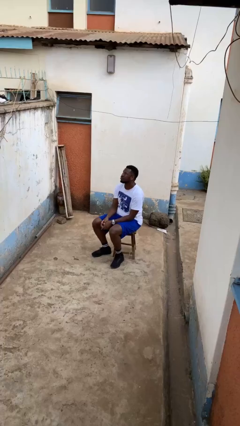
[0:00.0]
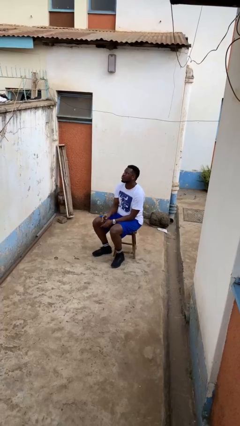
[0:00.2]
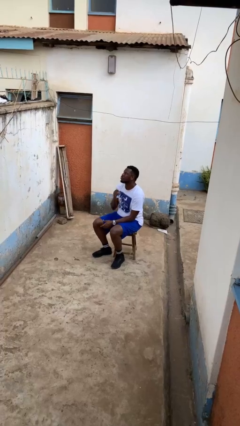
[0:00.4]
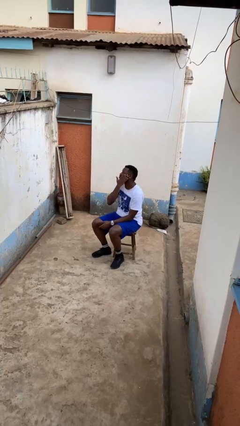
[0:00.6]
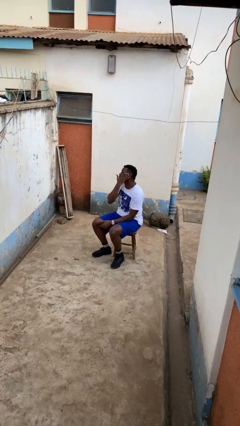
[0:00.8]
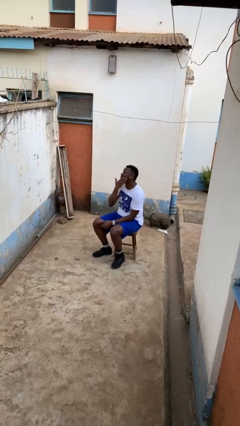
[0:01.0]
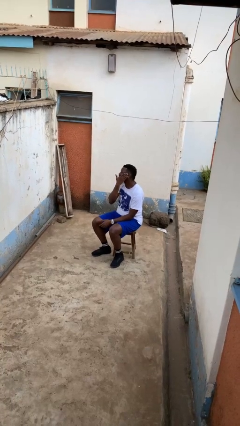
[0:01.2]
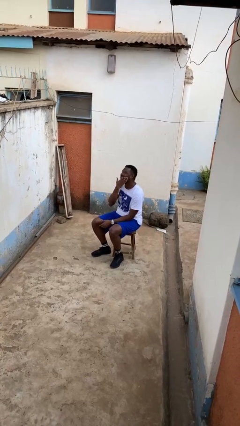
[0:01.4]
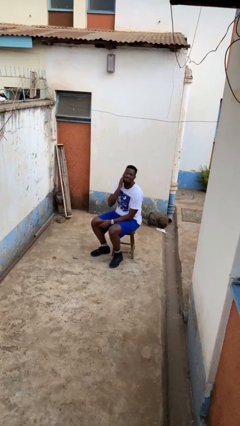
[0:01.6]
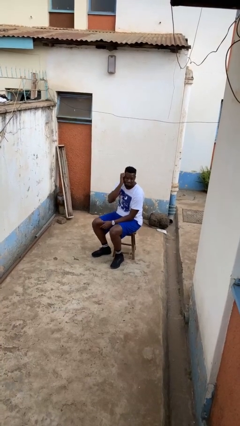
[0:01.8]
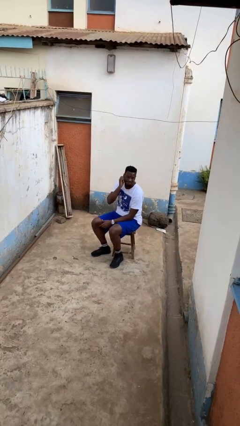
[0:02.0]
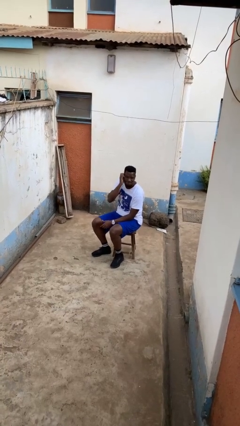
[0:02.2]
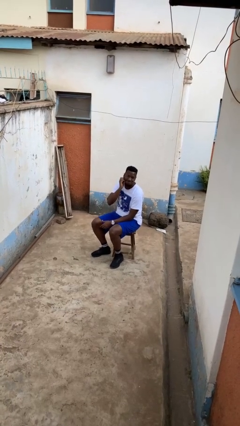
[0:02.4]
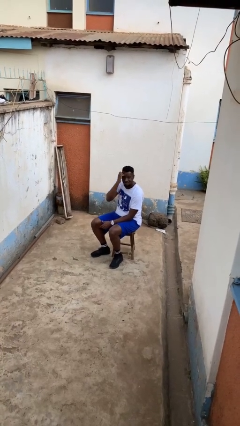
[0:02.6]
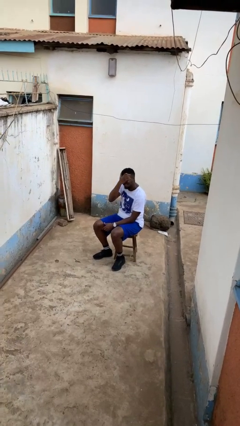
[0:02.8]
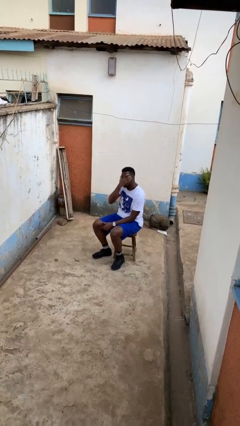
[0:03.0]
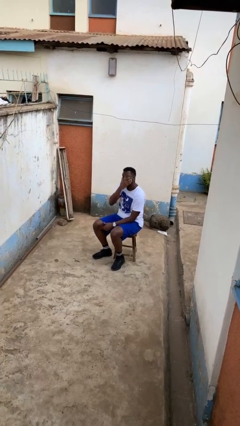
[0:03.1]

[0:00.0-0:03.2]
person scratches face

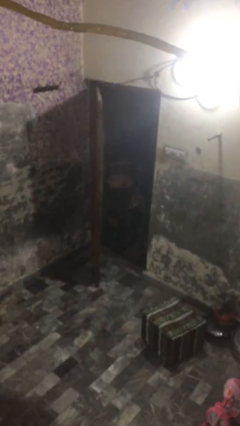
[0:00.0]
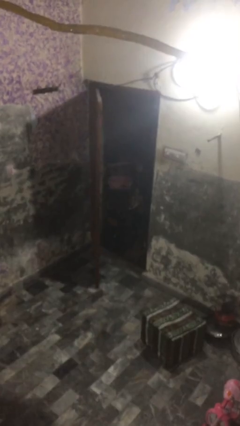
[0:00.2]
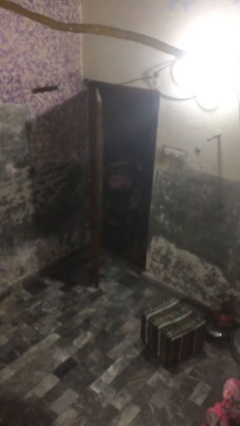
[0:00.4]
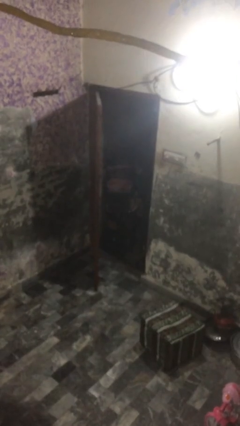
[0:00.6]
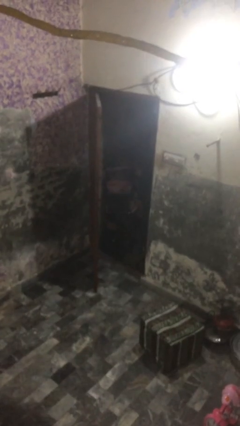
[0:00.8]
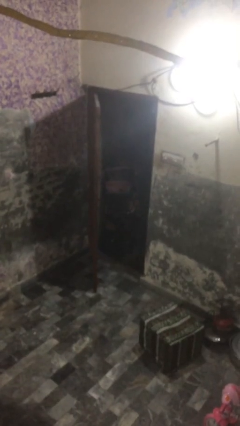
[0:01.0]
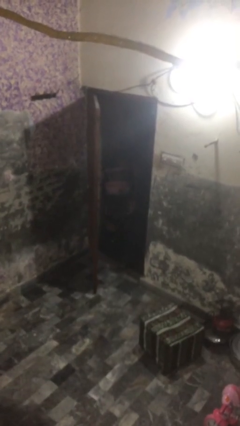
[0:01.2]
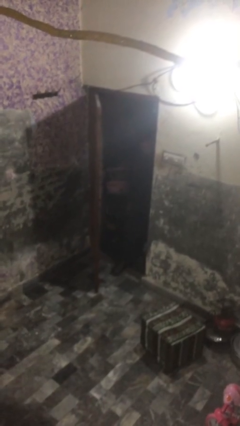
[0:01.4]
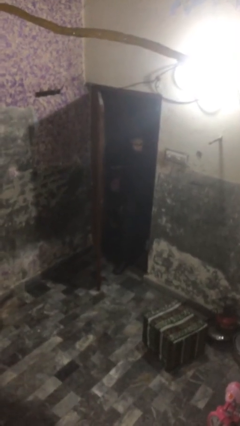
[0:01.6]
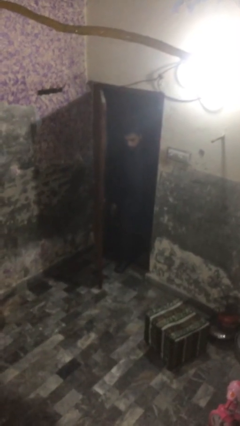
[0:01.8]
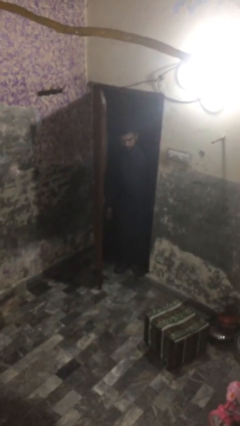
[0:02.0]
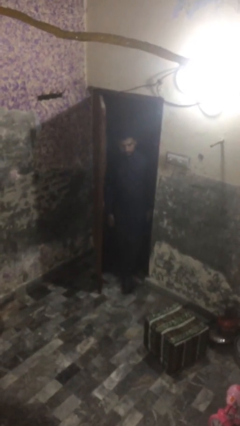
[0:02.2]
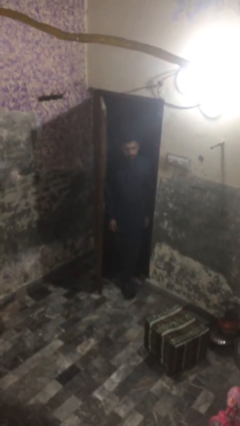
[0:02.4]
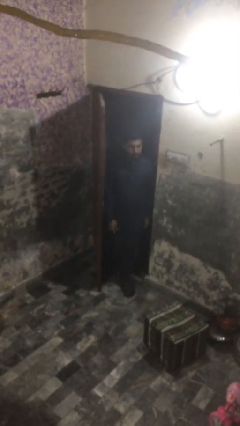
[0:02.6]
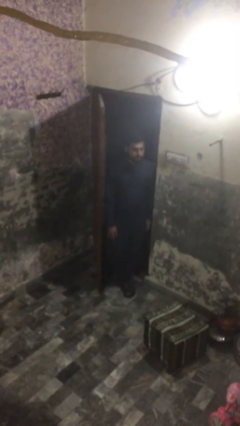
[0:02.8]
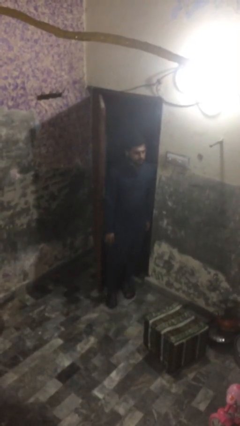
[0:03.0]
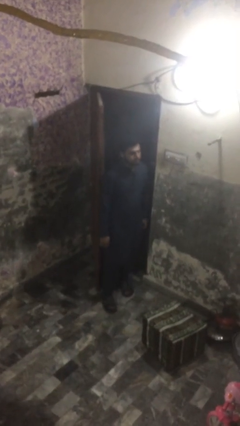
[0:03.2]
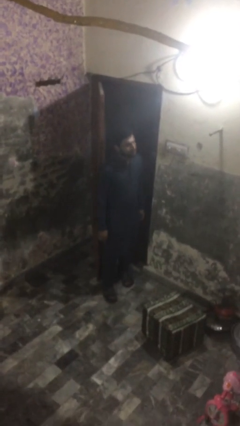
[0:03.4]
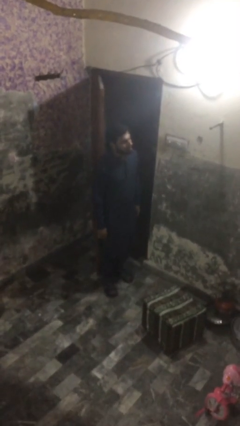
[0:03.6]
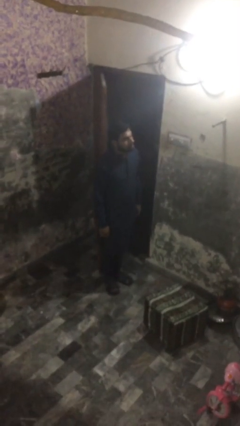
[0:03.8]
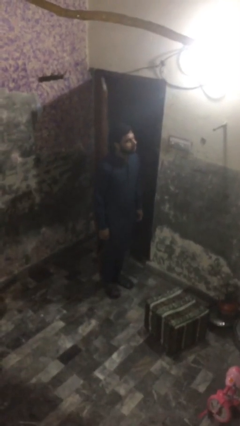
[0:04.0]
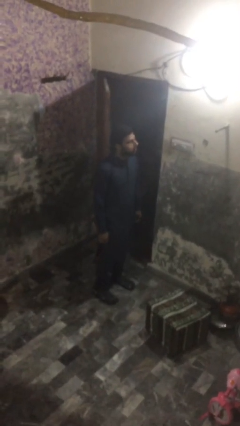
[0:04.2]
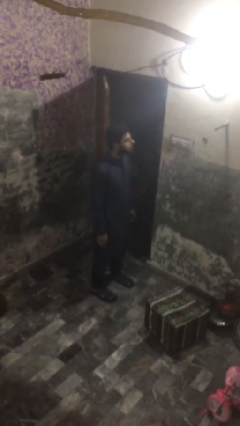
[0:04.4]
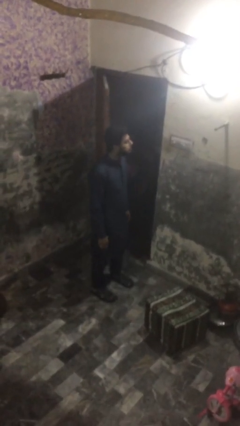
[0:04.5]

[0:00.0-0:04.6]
person enters scene through structure

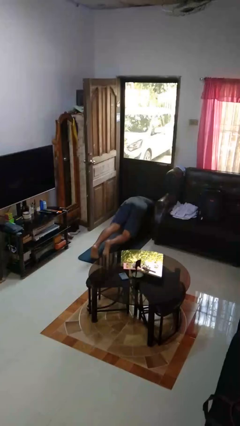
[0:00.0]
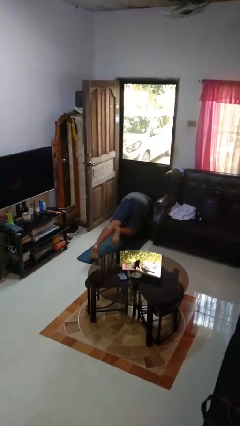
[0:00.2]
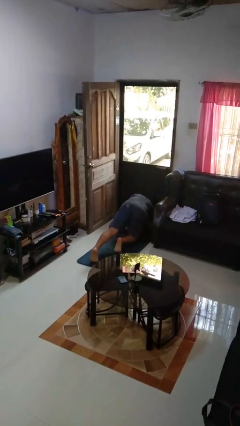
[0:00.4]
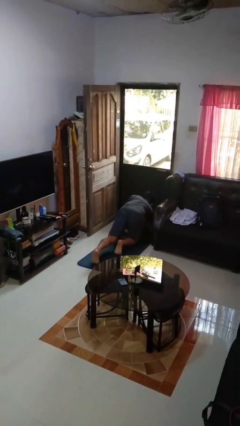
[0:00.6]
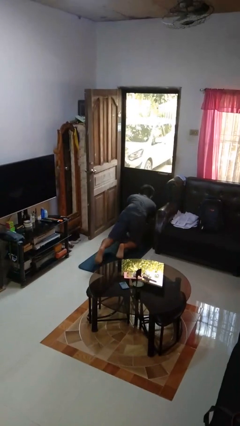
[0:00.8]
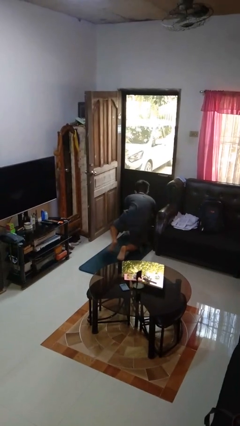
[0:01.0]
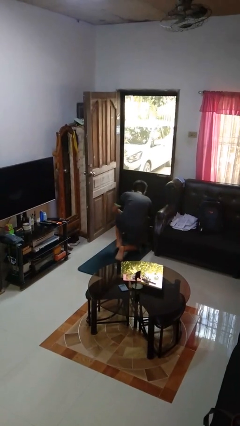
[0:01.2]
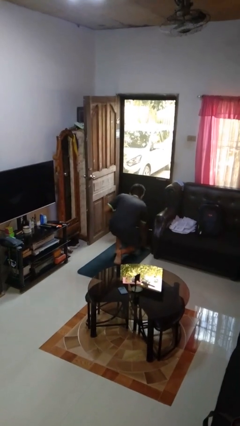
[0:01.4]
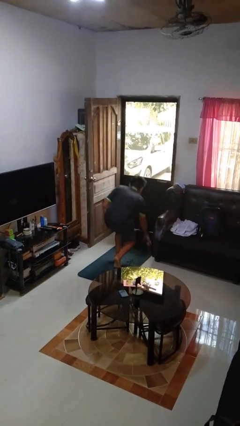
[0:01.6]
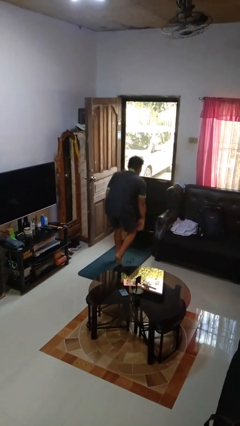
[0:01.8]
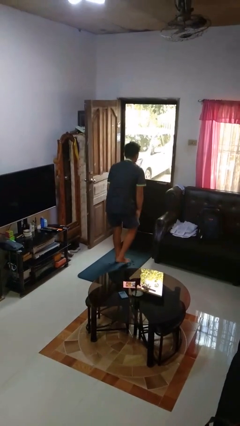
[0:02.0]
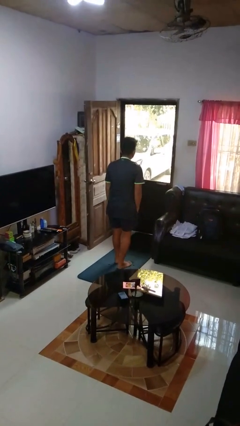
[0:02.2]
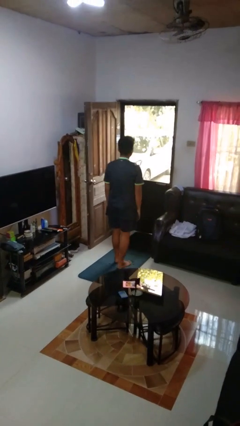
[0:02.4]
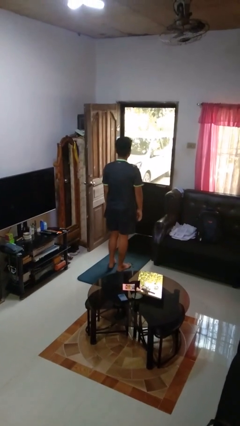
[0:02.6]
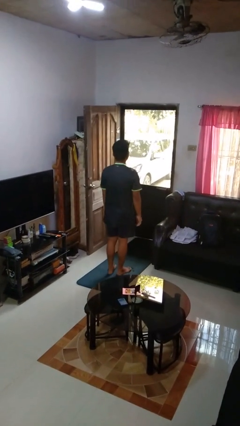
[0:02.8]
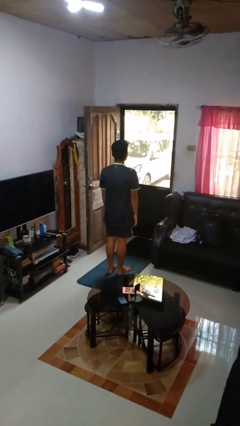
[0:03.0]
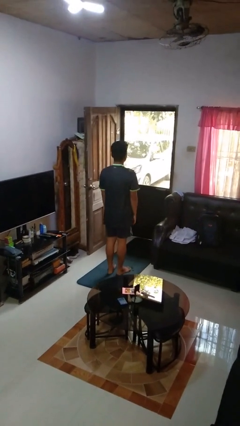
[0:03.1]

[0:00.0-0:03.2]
person stands up from floor

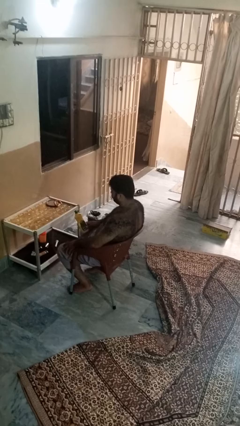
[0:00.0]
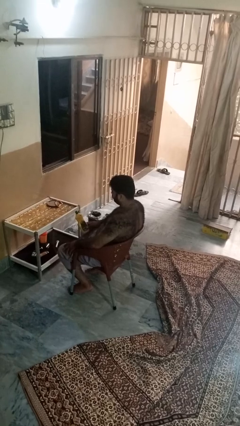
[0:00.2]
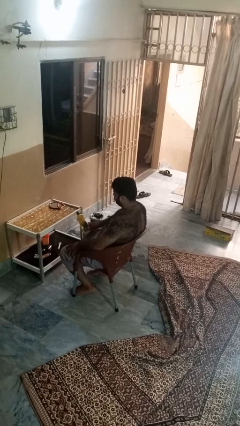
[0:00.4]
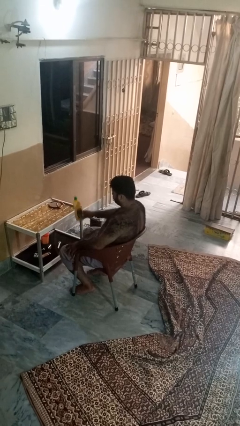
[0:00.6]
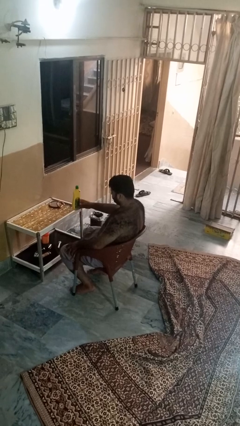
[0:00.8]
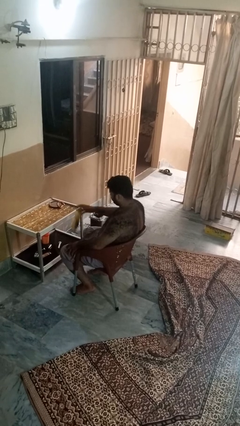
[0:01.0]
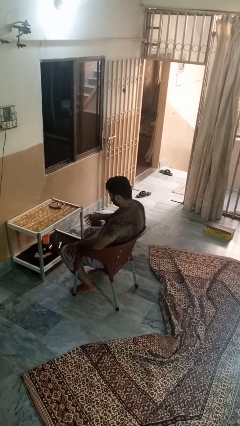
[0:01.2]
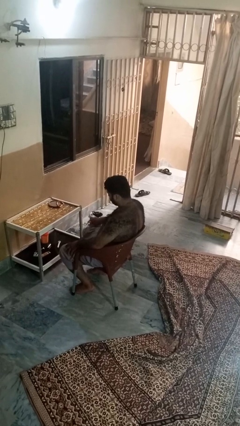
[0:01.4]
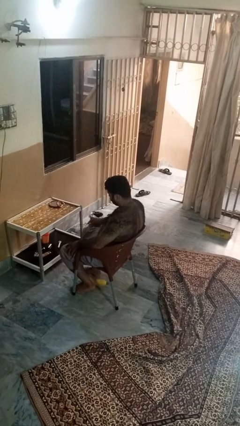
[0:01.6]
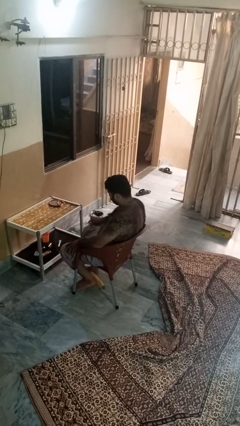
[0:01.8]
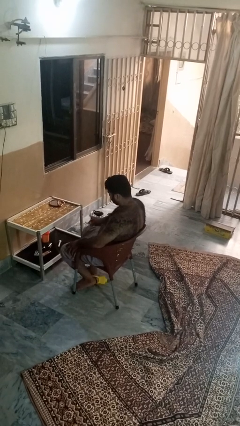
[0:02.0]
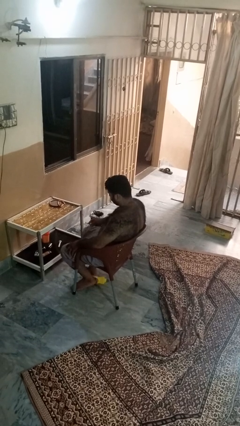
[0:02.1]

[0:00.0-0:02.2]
person throws object to ground

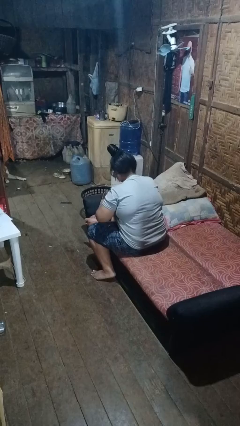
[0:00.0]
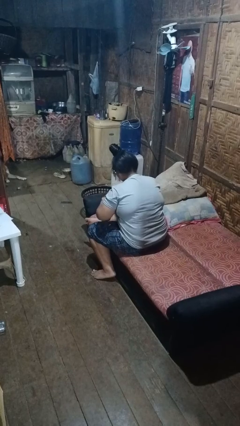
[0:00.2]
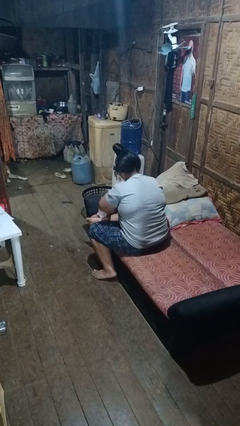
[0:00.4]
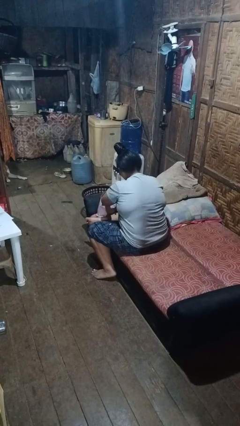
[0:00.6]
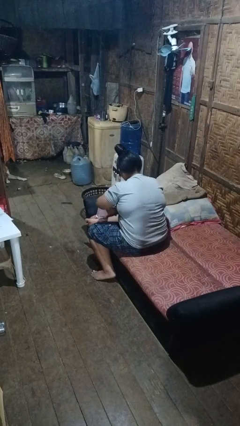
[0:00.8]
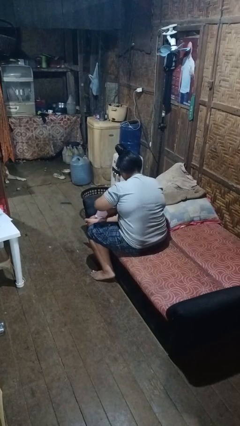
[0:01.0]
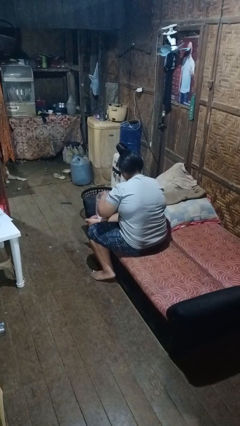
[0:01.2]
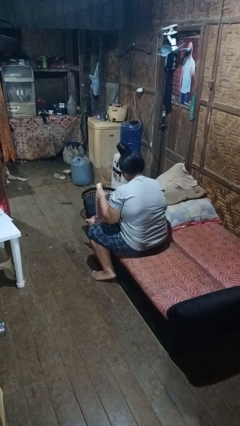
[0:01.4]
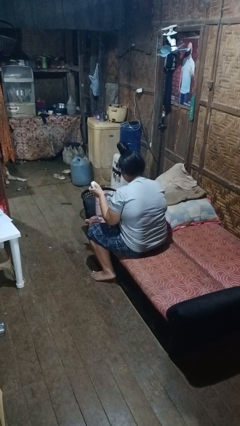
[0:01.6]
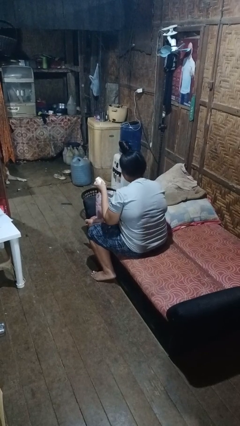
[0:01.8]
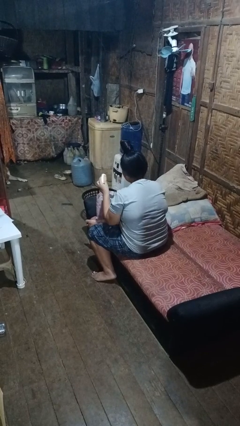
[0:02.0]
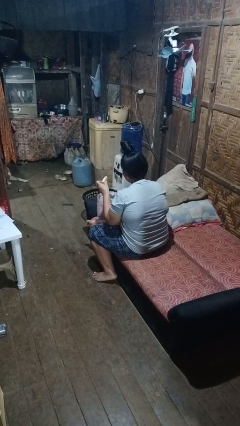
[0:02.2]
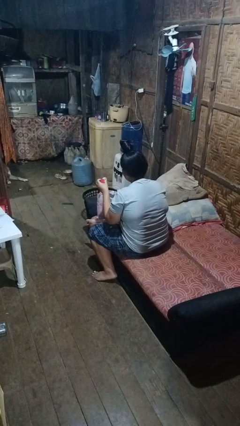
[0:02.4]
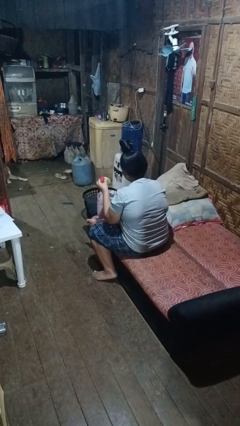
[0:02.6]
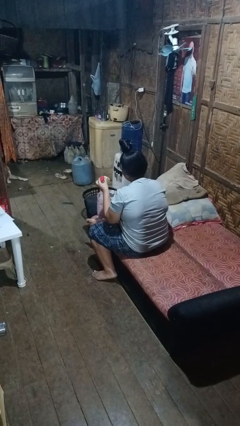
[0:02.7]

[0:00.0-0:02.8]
person takes object from bag

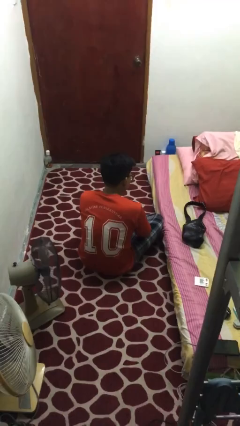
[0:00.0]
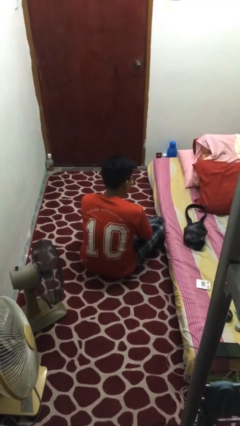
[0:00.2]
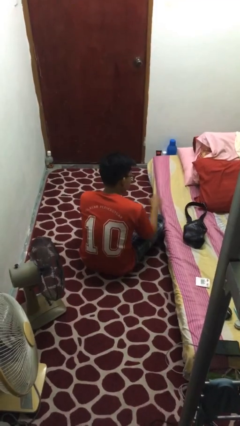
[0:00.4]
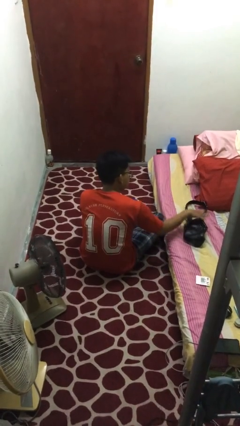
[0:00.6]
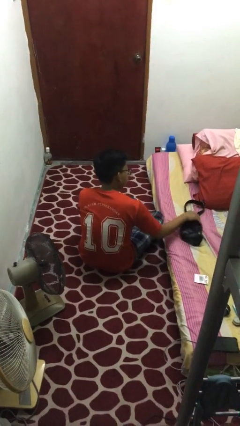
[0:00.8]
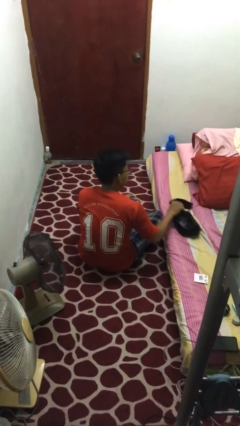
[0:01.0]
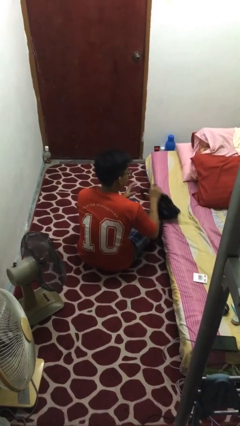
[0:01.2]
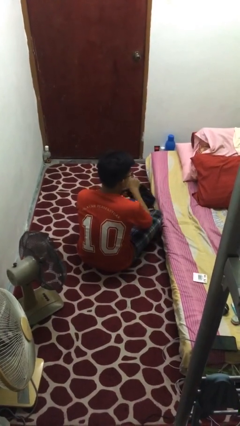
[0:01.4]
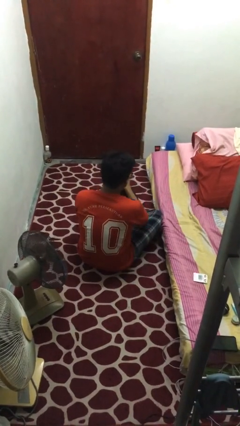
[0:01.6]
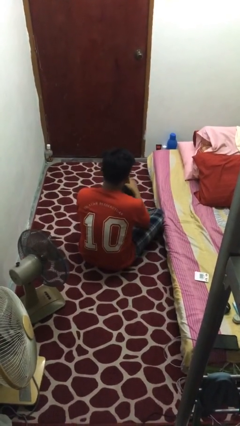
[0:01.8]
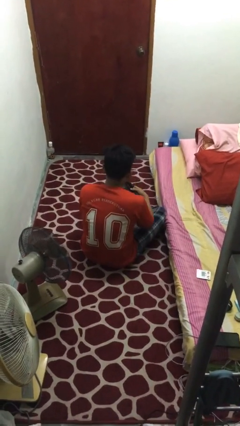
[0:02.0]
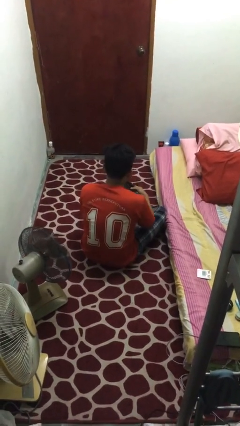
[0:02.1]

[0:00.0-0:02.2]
person picks up object from bed
